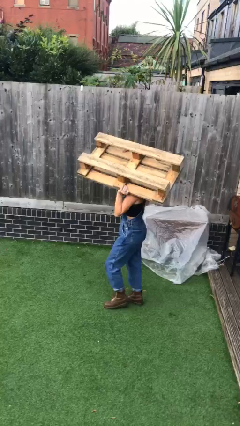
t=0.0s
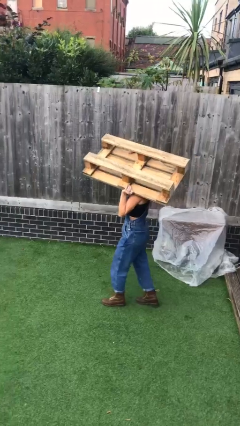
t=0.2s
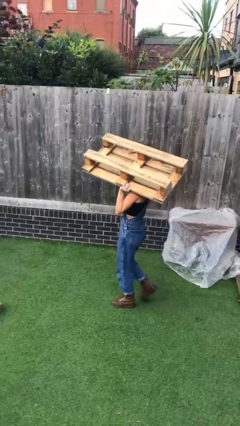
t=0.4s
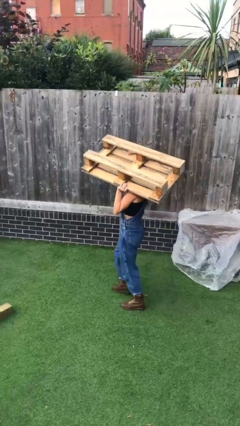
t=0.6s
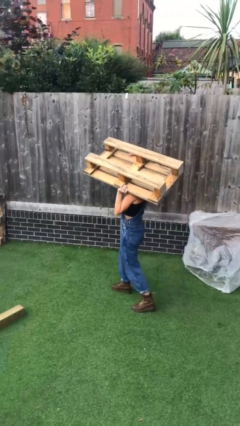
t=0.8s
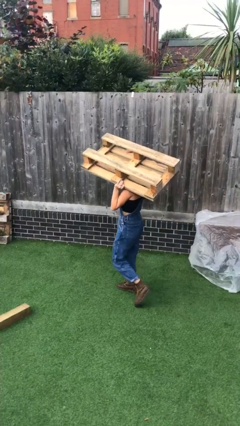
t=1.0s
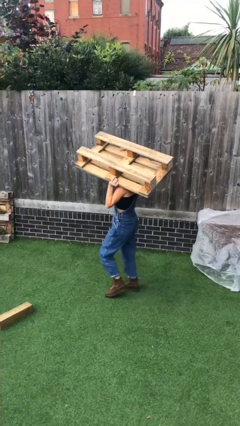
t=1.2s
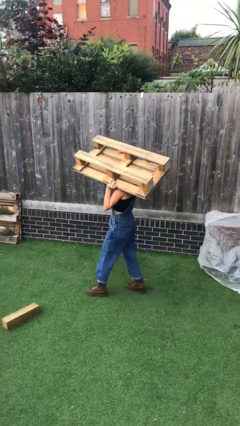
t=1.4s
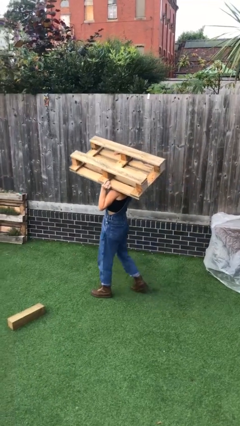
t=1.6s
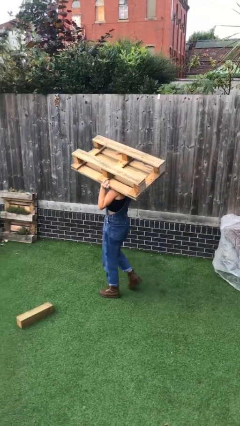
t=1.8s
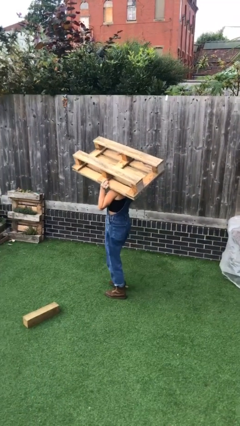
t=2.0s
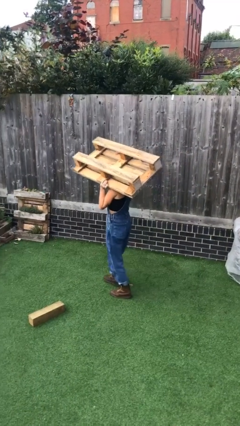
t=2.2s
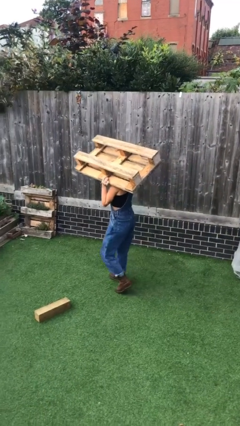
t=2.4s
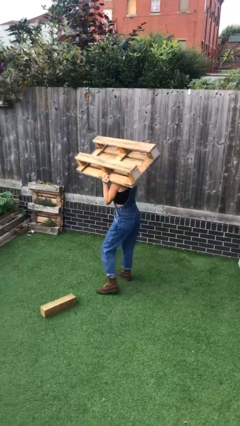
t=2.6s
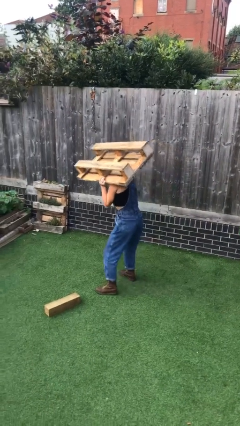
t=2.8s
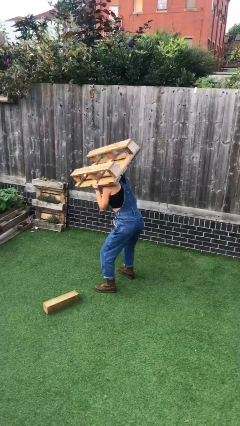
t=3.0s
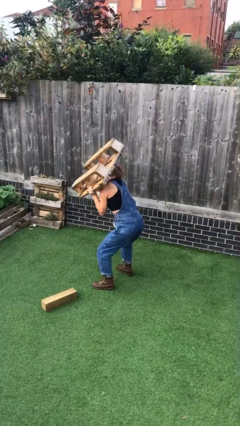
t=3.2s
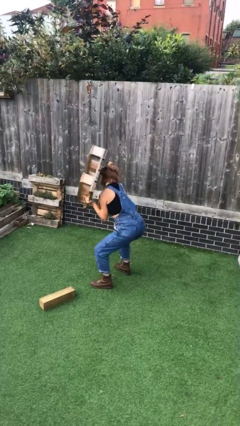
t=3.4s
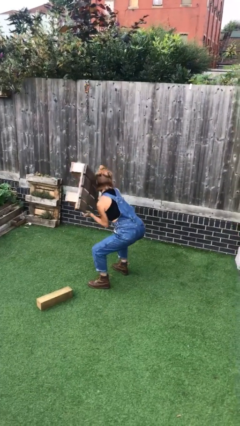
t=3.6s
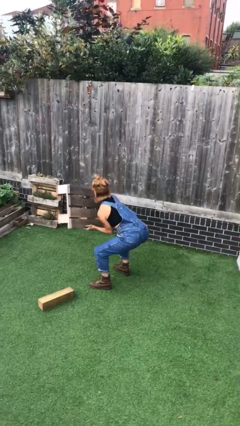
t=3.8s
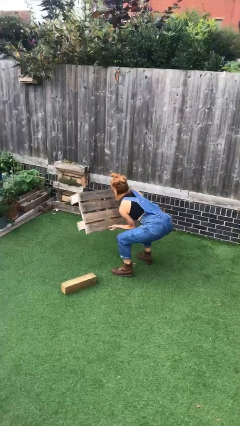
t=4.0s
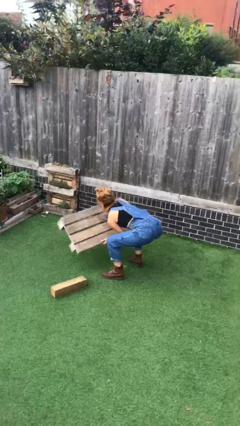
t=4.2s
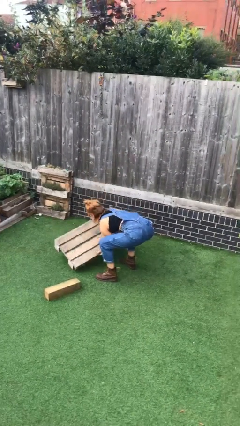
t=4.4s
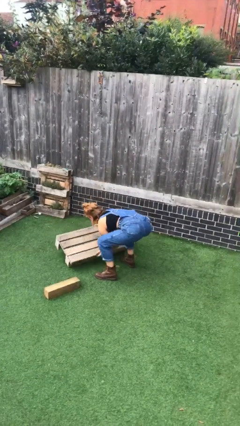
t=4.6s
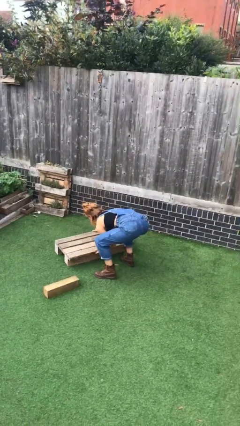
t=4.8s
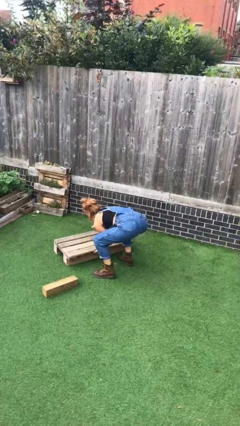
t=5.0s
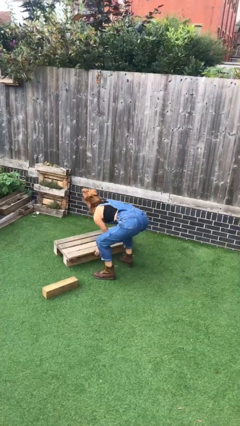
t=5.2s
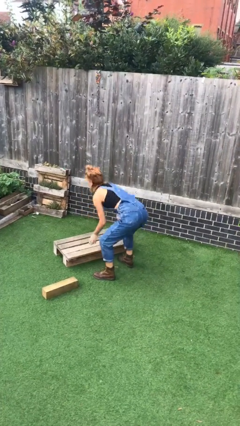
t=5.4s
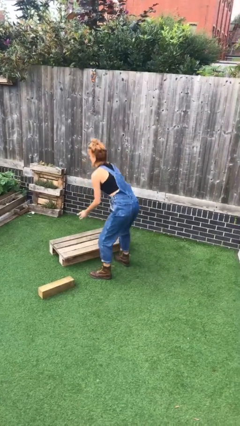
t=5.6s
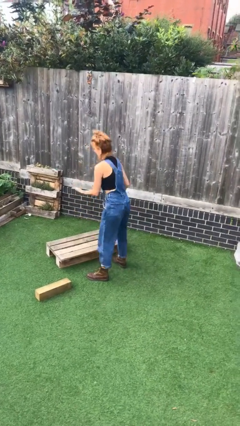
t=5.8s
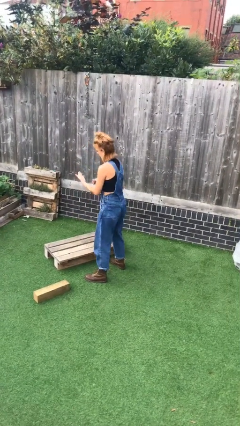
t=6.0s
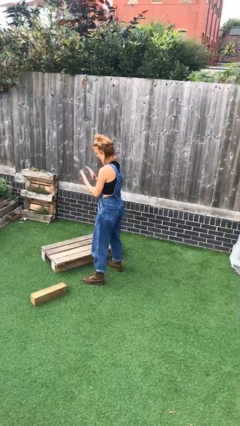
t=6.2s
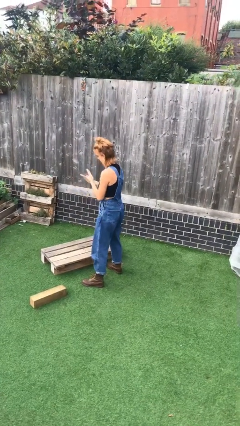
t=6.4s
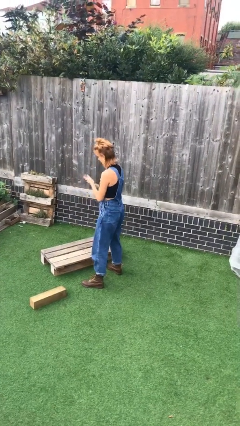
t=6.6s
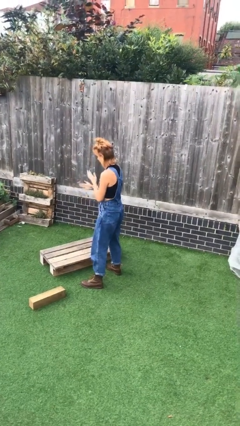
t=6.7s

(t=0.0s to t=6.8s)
person puts down object on floor

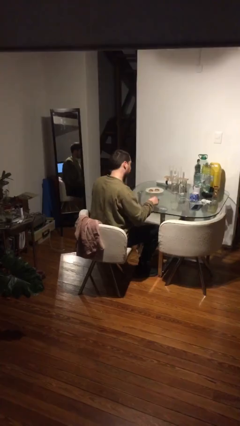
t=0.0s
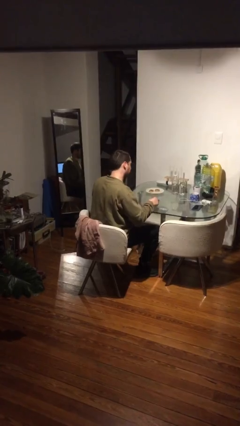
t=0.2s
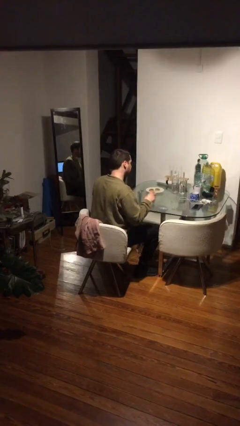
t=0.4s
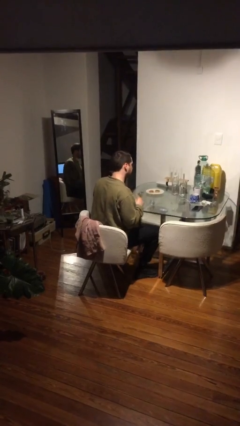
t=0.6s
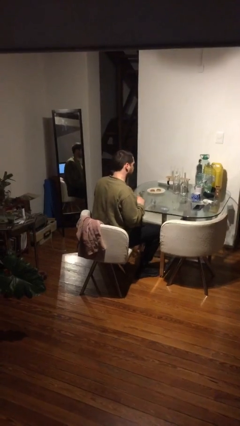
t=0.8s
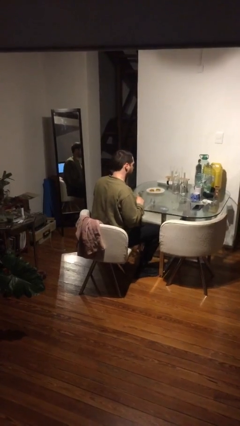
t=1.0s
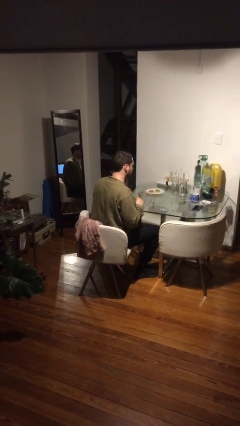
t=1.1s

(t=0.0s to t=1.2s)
person puts down object on table

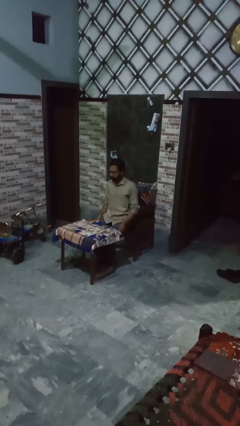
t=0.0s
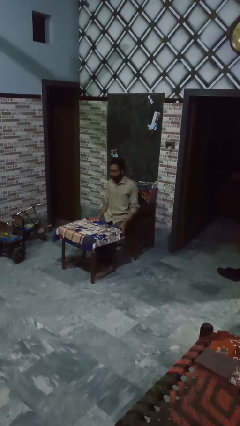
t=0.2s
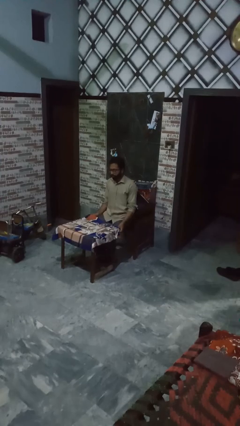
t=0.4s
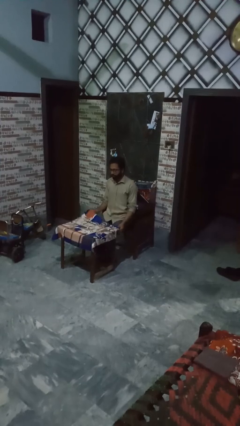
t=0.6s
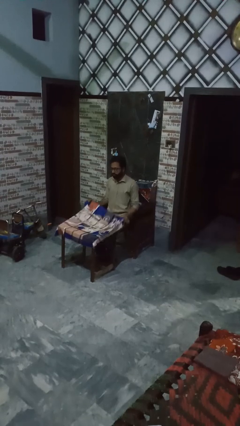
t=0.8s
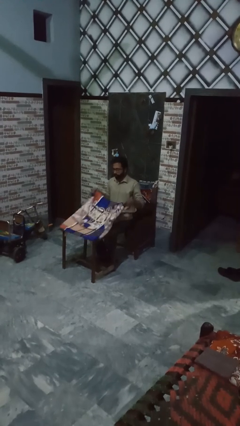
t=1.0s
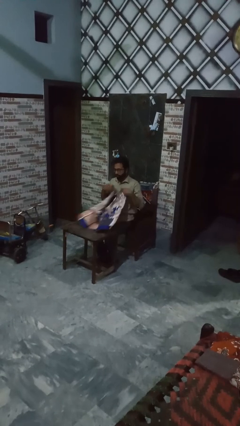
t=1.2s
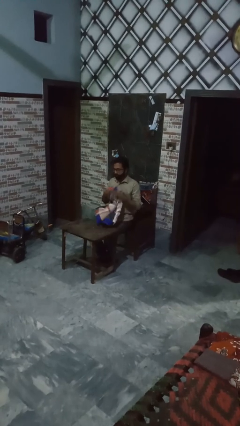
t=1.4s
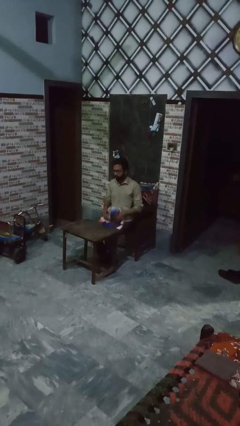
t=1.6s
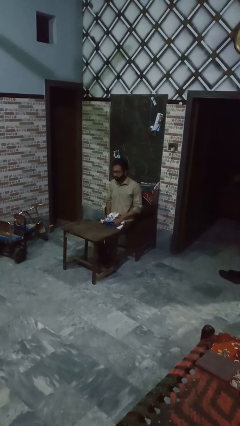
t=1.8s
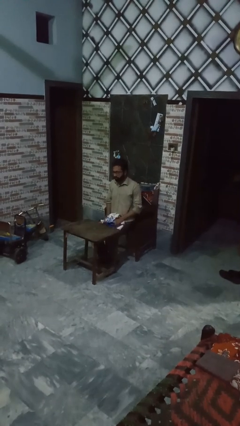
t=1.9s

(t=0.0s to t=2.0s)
person spreads tablecloth

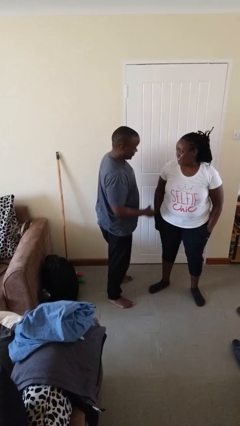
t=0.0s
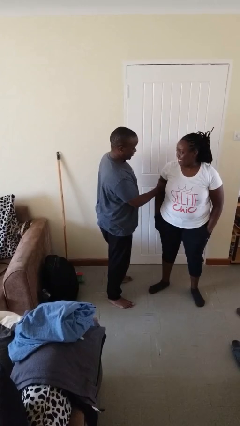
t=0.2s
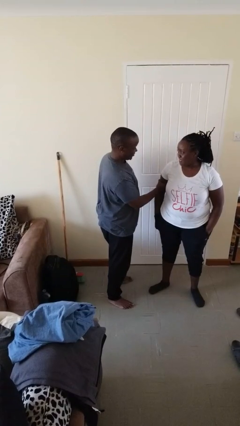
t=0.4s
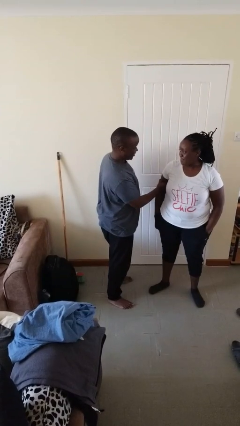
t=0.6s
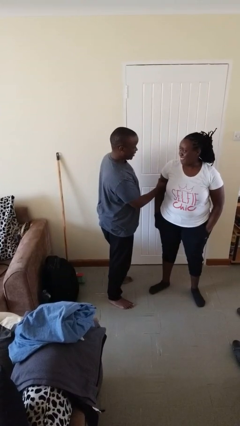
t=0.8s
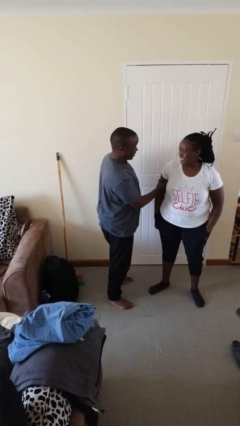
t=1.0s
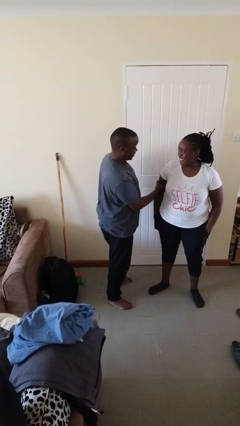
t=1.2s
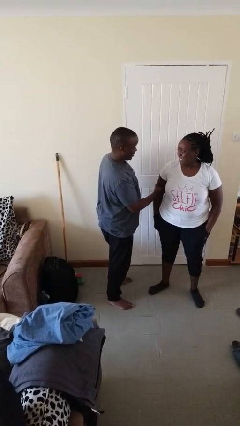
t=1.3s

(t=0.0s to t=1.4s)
person grabs person by bicep

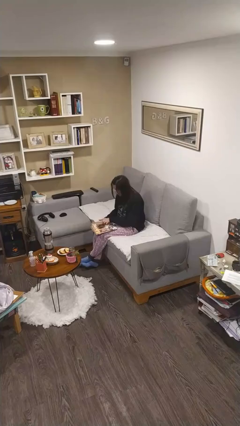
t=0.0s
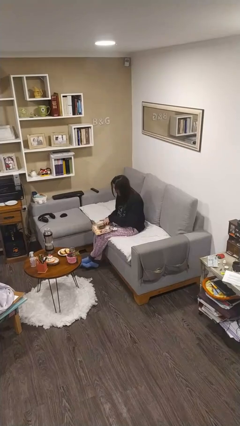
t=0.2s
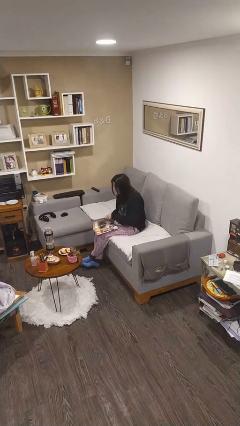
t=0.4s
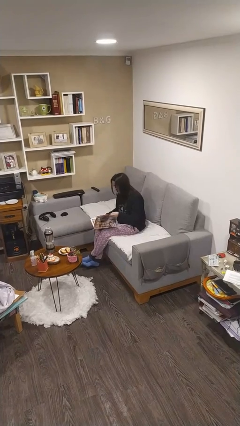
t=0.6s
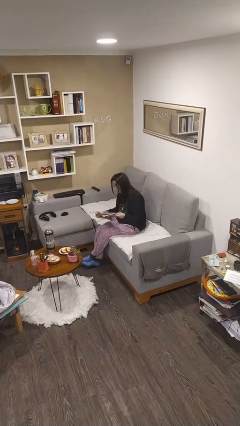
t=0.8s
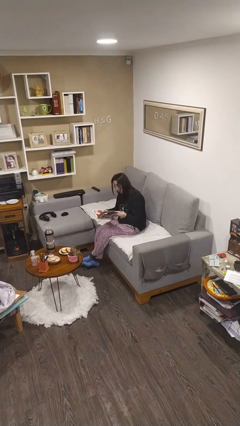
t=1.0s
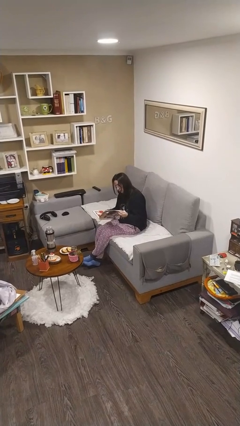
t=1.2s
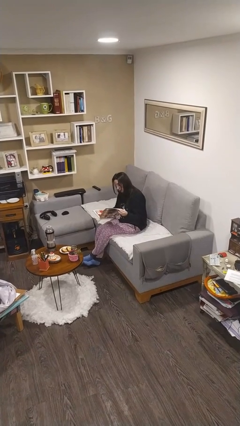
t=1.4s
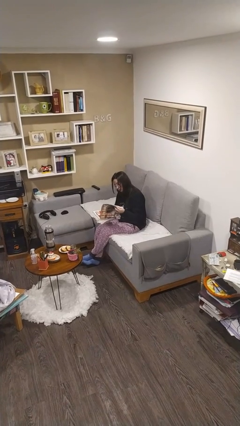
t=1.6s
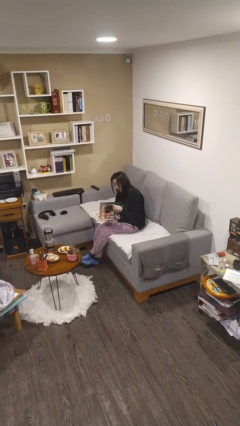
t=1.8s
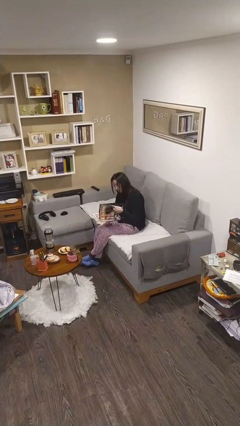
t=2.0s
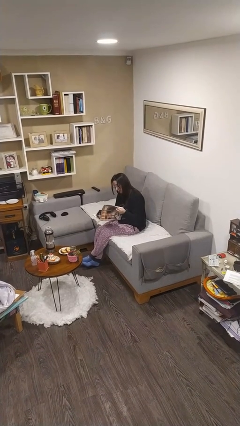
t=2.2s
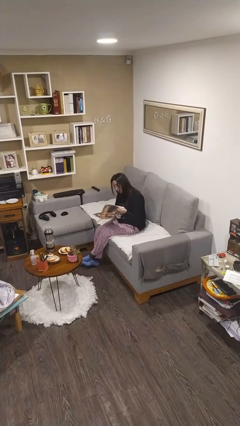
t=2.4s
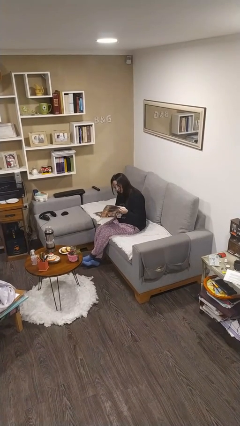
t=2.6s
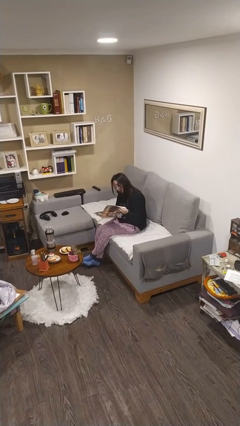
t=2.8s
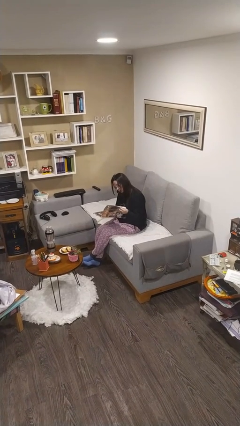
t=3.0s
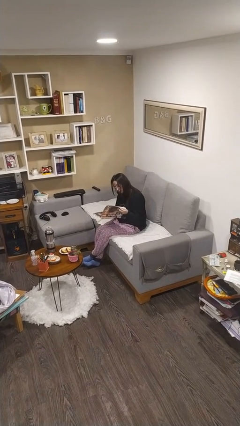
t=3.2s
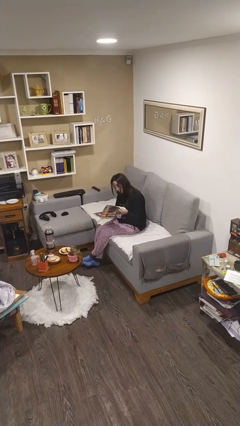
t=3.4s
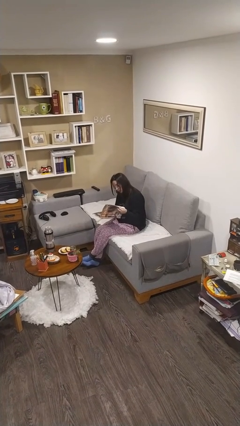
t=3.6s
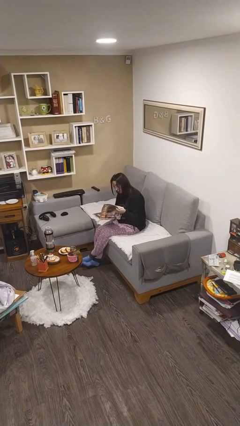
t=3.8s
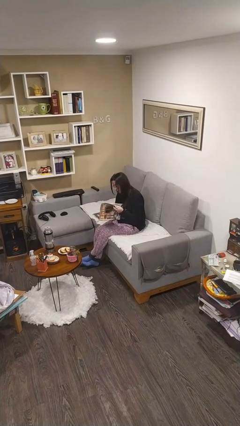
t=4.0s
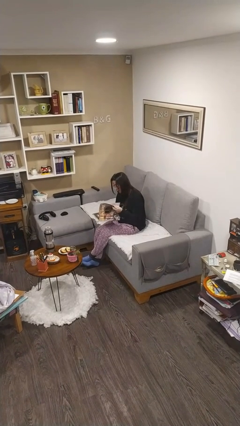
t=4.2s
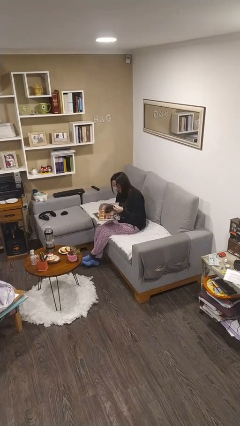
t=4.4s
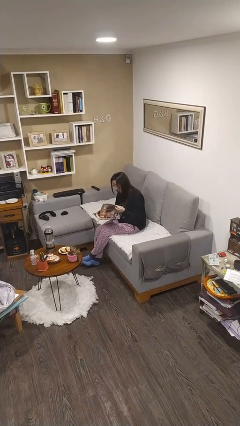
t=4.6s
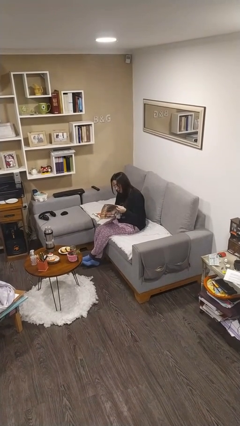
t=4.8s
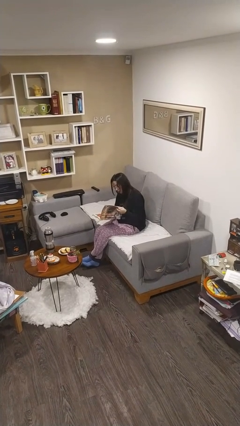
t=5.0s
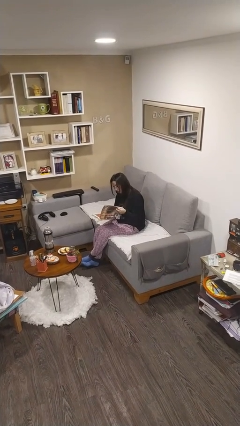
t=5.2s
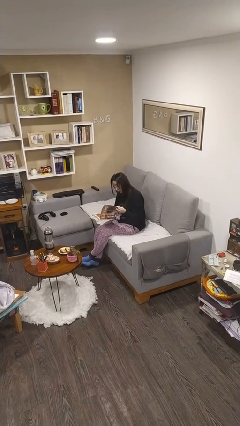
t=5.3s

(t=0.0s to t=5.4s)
person reads magazine

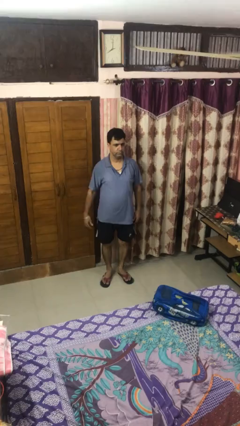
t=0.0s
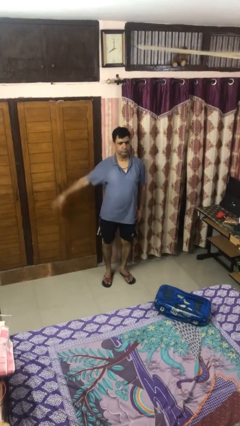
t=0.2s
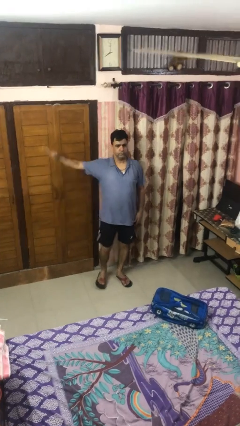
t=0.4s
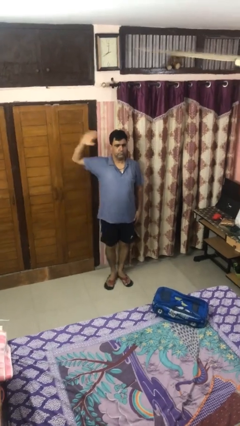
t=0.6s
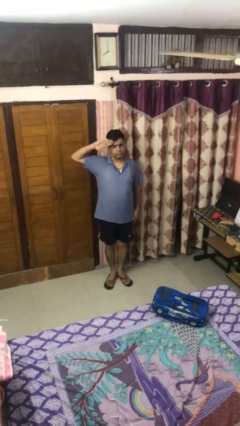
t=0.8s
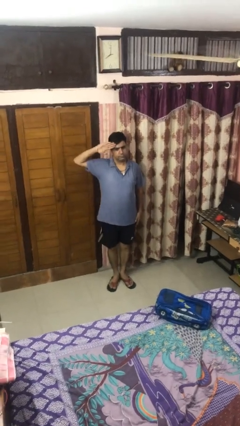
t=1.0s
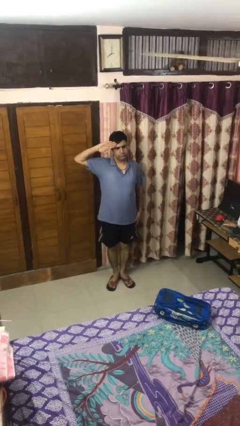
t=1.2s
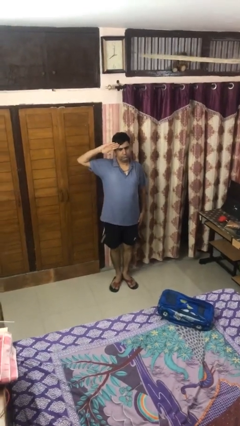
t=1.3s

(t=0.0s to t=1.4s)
person salutes
